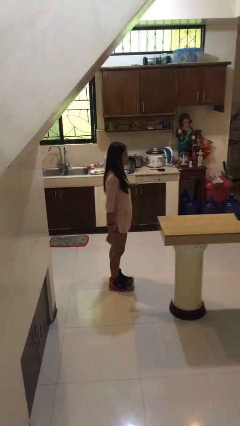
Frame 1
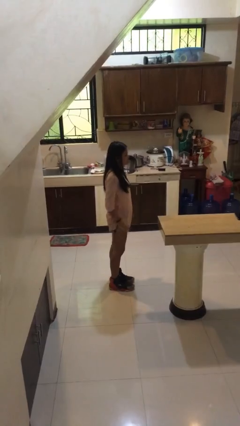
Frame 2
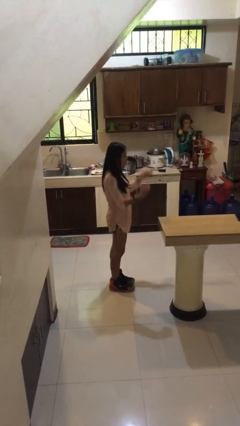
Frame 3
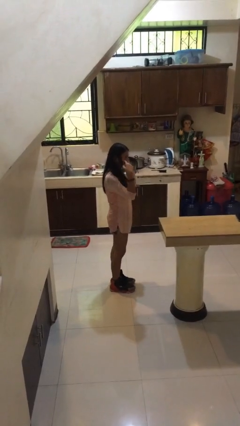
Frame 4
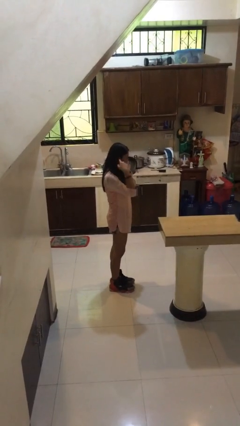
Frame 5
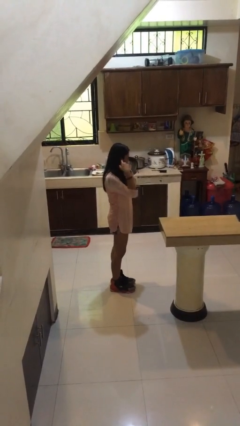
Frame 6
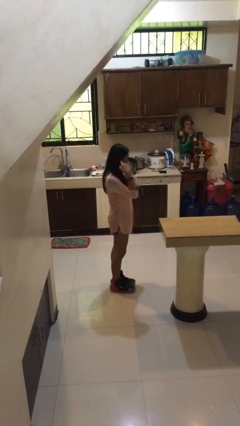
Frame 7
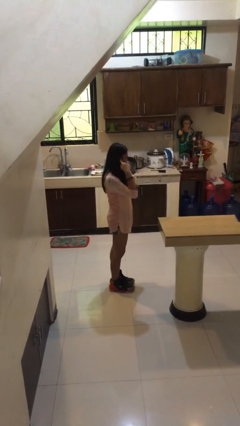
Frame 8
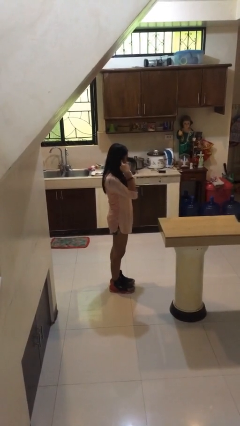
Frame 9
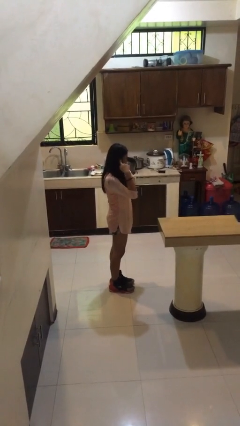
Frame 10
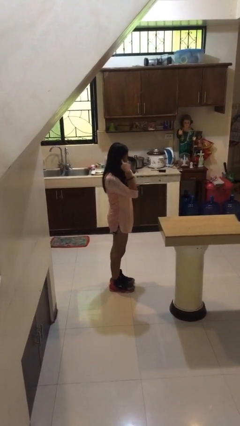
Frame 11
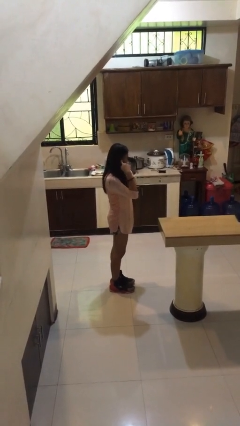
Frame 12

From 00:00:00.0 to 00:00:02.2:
person puts fingers in ear

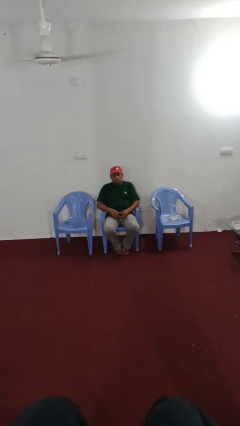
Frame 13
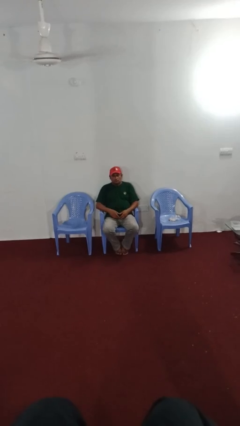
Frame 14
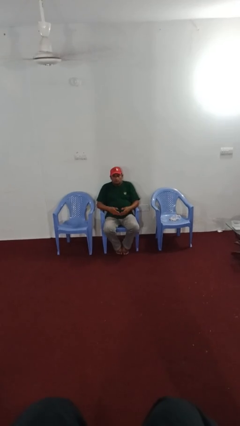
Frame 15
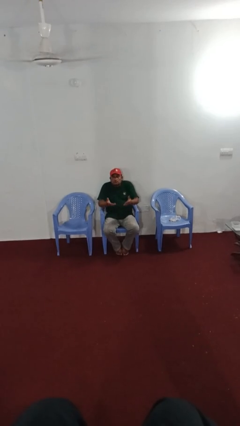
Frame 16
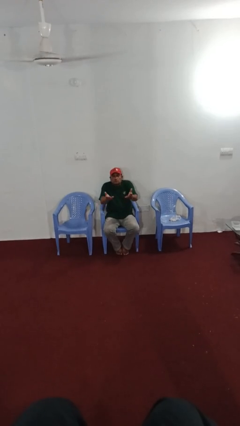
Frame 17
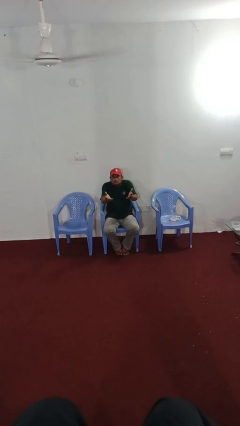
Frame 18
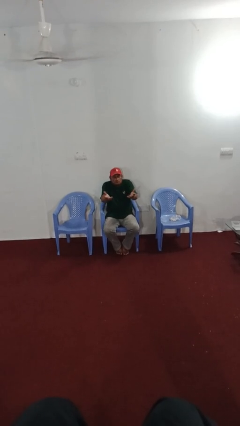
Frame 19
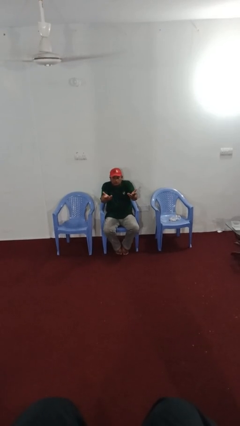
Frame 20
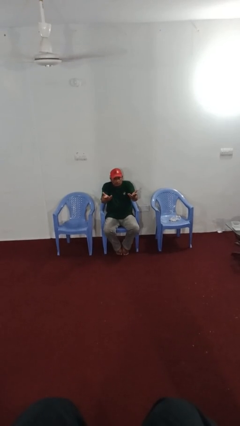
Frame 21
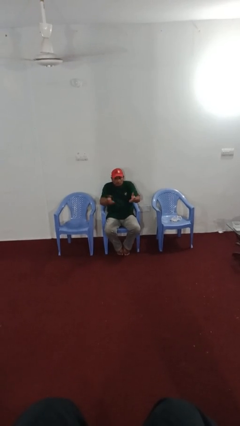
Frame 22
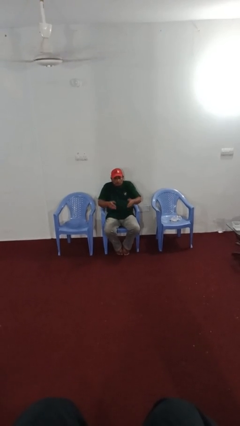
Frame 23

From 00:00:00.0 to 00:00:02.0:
person shrugs

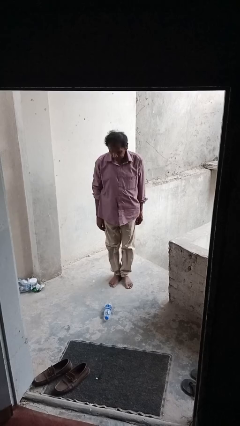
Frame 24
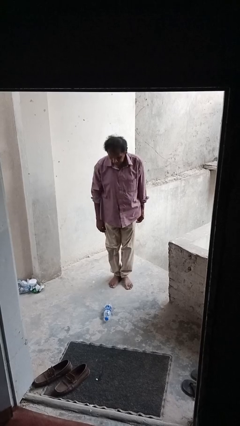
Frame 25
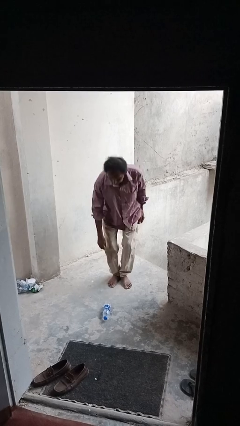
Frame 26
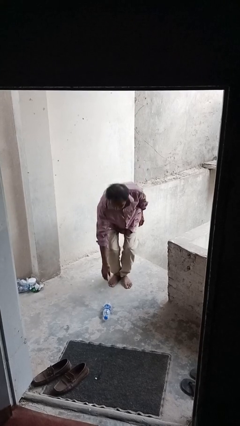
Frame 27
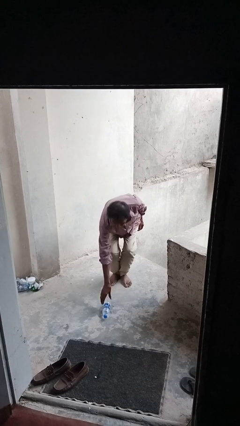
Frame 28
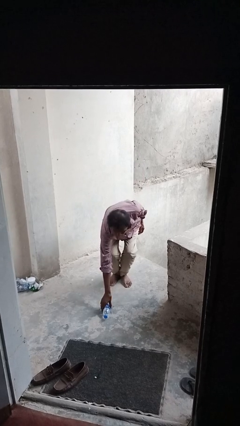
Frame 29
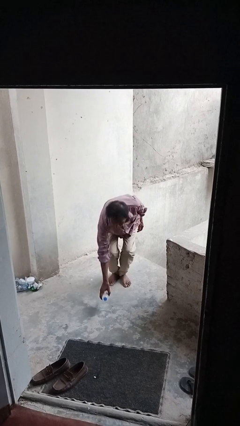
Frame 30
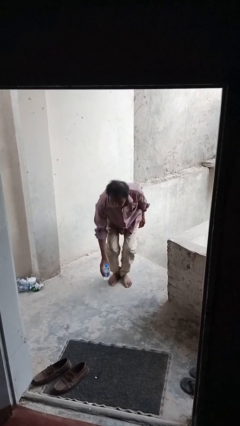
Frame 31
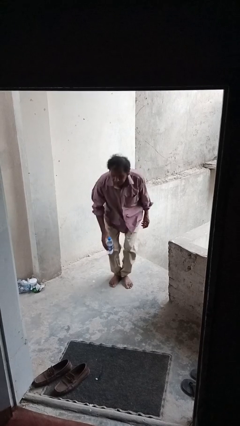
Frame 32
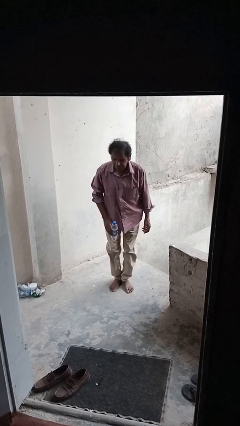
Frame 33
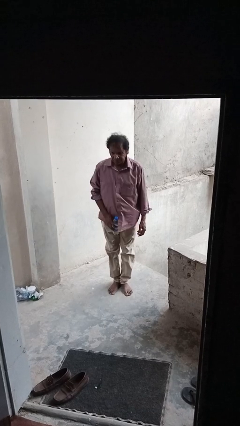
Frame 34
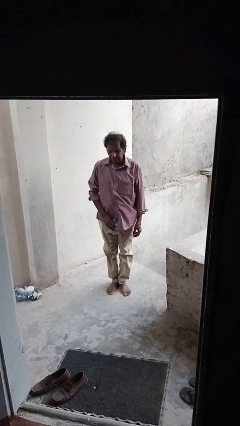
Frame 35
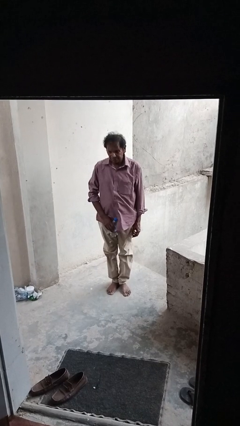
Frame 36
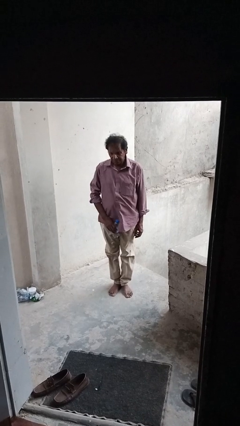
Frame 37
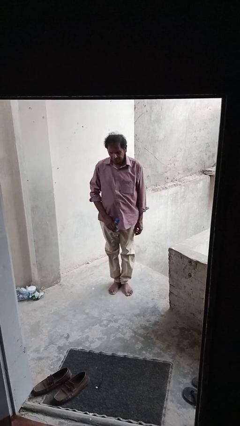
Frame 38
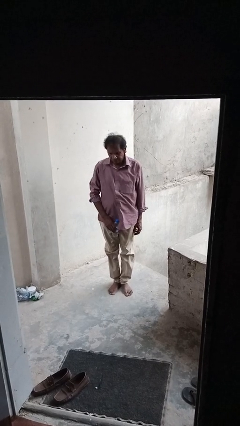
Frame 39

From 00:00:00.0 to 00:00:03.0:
person picks up object from floor

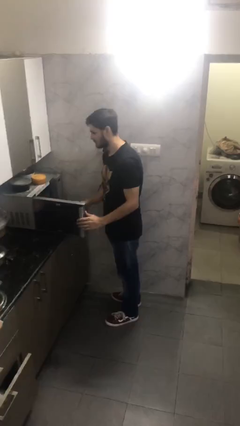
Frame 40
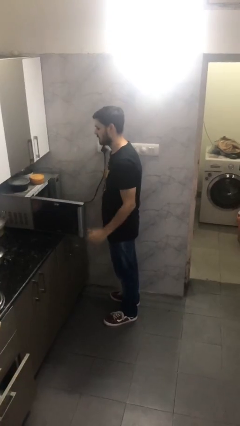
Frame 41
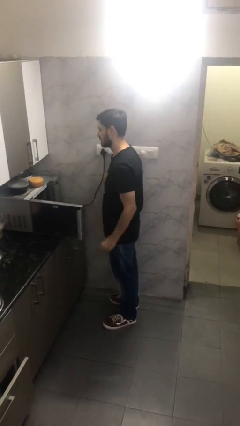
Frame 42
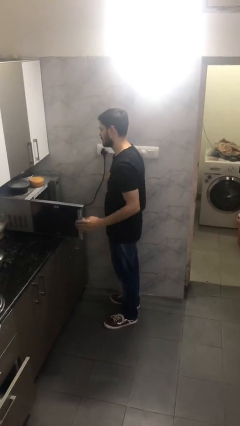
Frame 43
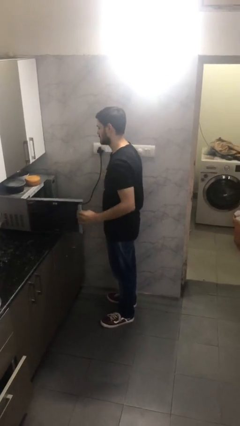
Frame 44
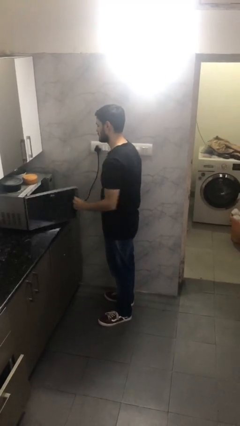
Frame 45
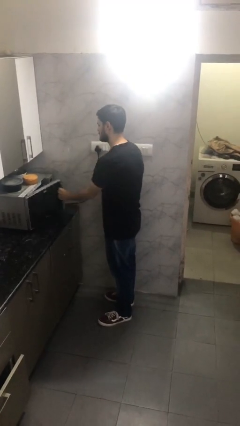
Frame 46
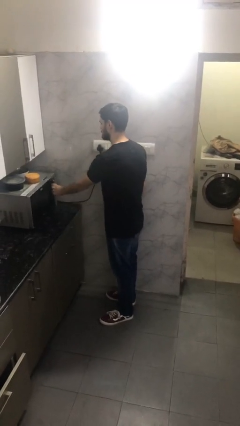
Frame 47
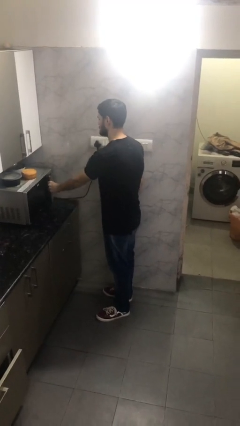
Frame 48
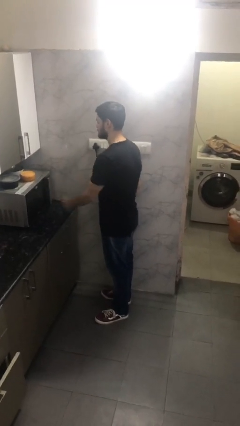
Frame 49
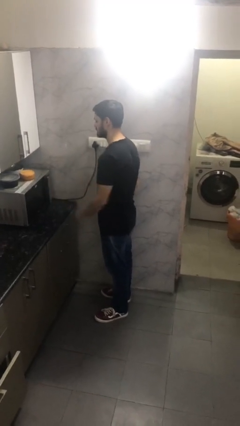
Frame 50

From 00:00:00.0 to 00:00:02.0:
person closes microwave

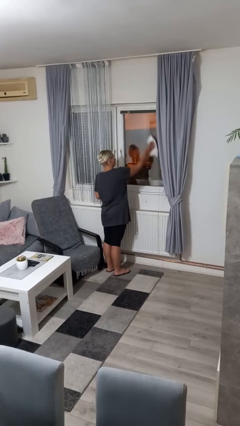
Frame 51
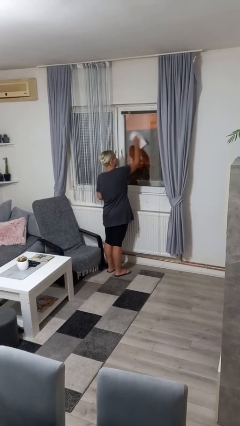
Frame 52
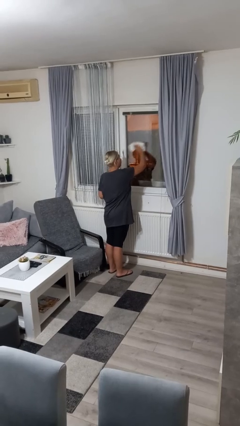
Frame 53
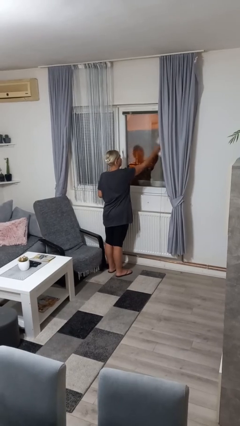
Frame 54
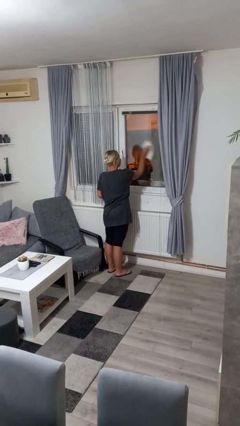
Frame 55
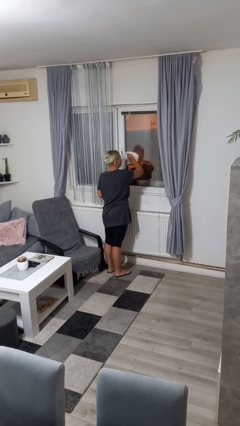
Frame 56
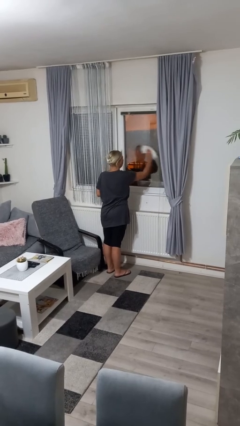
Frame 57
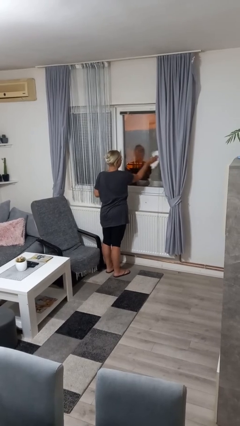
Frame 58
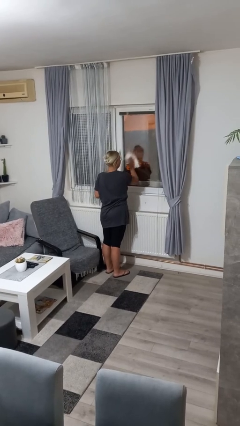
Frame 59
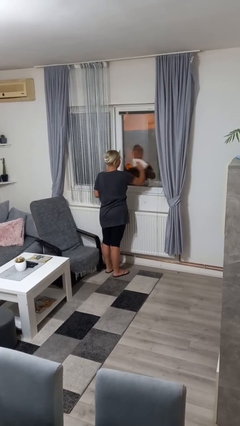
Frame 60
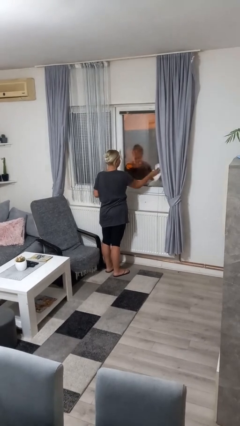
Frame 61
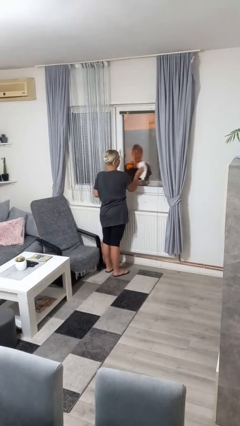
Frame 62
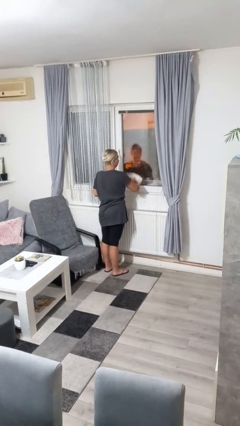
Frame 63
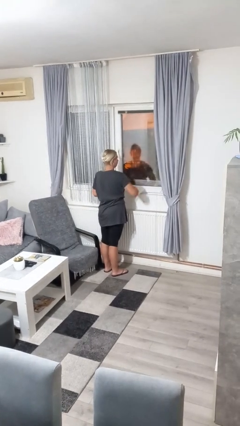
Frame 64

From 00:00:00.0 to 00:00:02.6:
person washes window

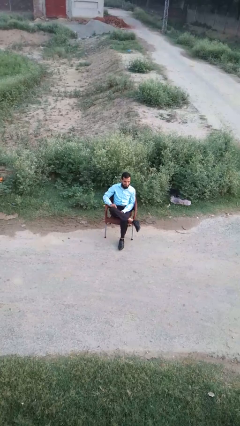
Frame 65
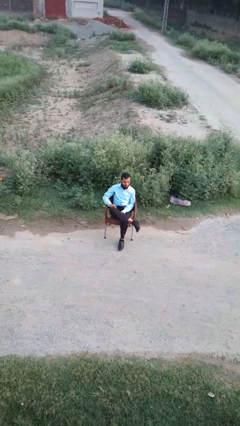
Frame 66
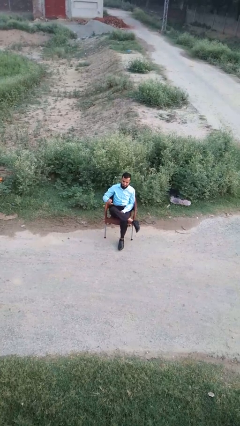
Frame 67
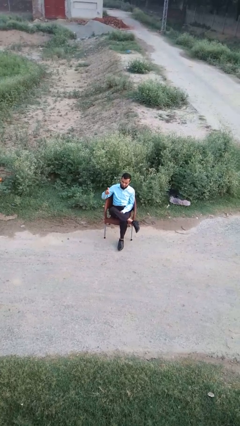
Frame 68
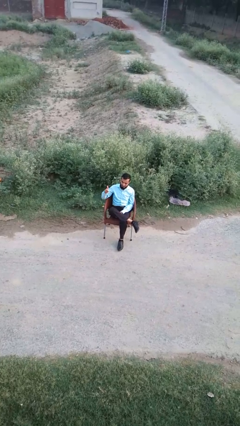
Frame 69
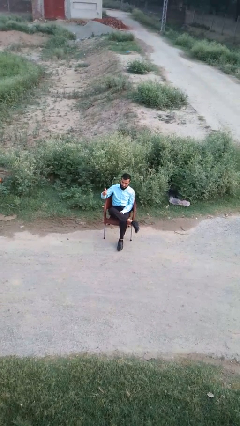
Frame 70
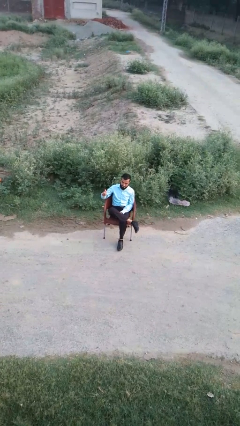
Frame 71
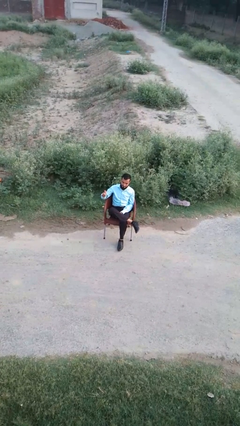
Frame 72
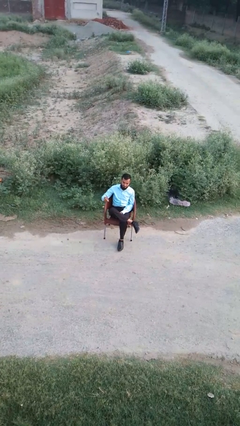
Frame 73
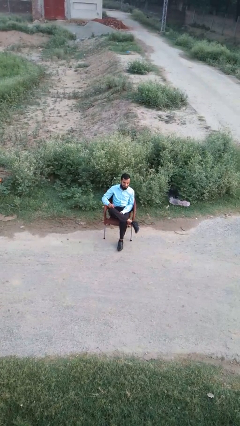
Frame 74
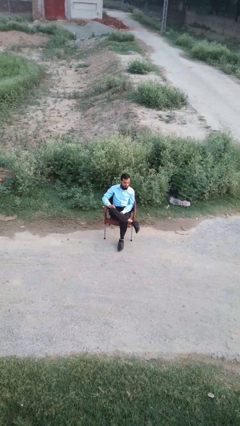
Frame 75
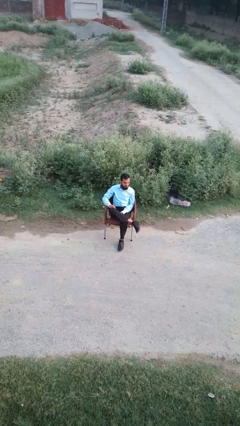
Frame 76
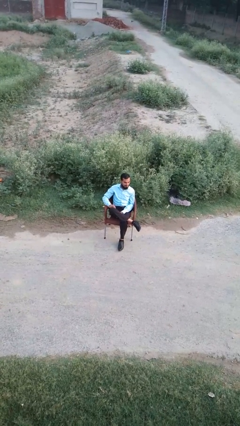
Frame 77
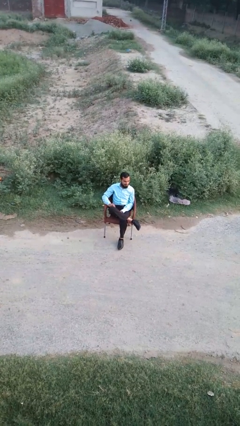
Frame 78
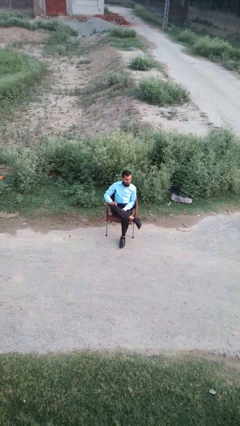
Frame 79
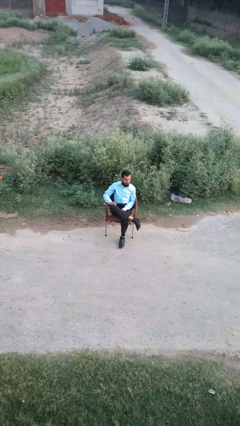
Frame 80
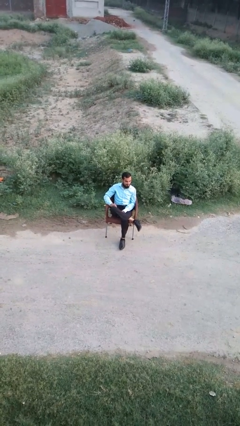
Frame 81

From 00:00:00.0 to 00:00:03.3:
person gestures thumbs up

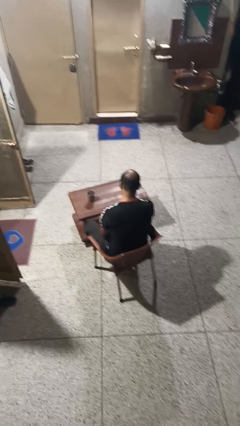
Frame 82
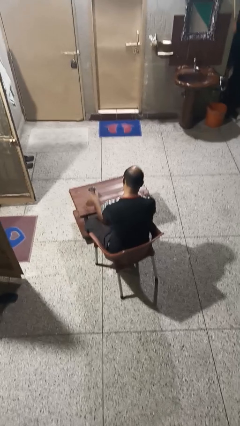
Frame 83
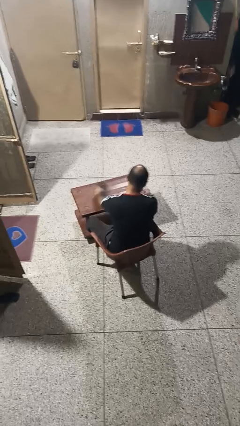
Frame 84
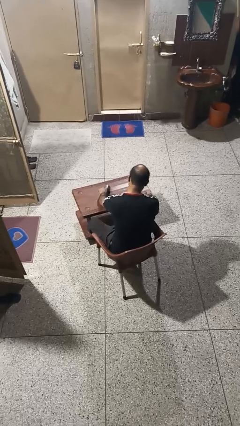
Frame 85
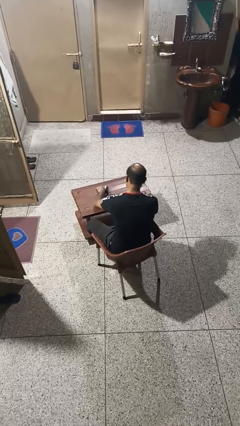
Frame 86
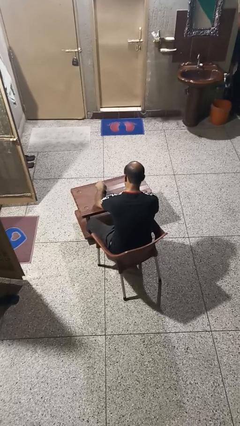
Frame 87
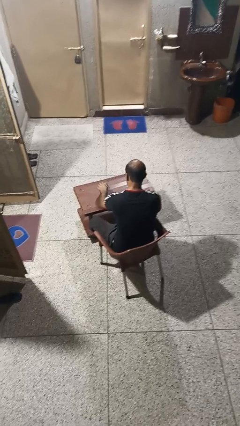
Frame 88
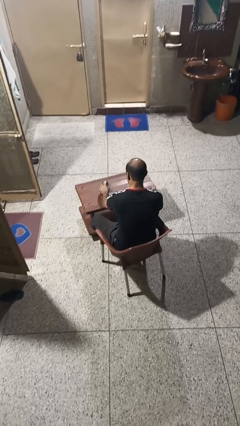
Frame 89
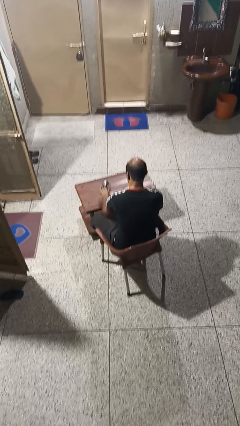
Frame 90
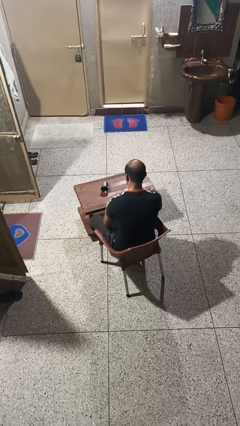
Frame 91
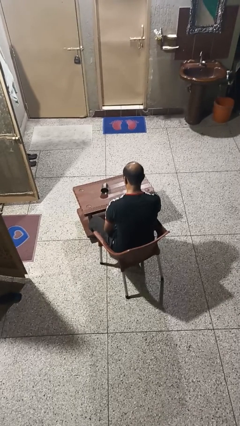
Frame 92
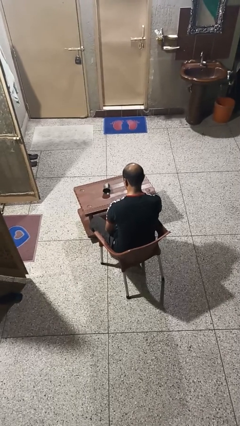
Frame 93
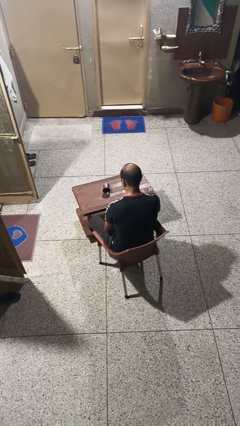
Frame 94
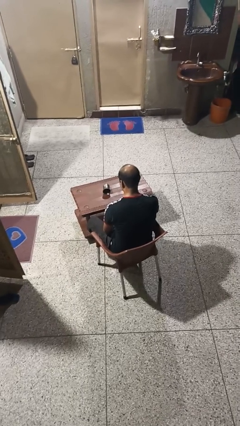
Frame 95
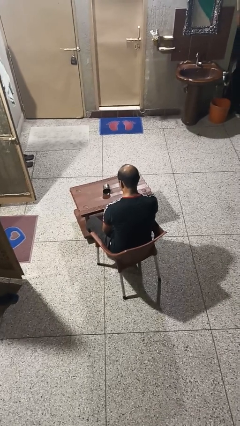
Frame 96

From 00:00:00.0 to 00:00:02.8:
person knocks over glass
